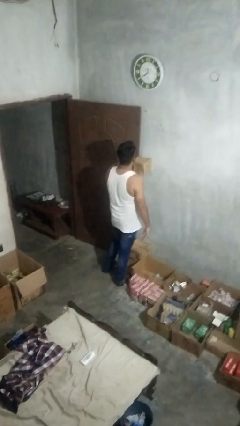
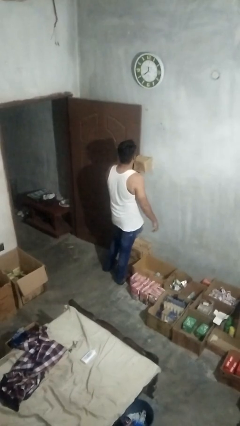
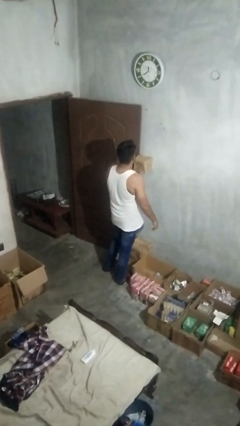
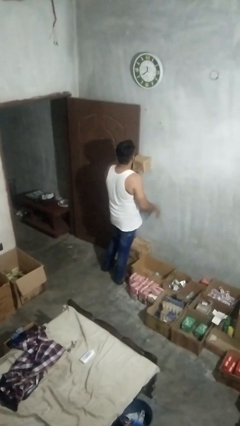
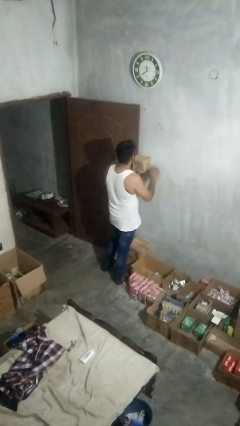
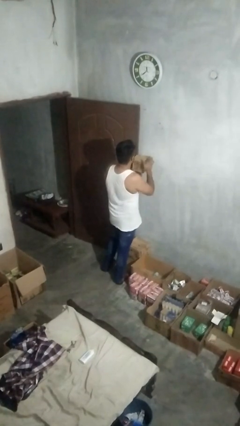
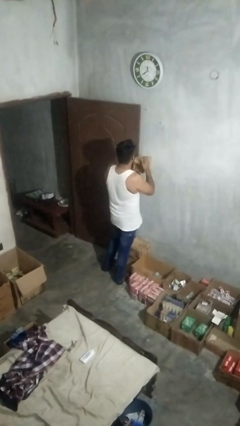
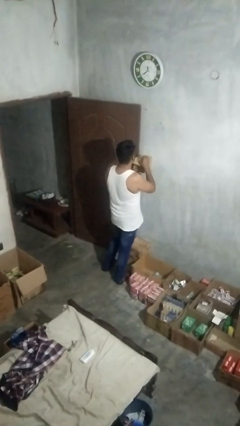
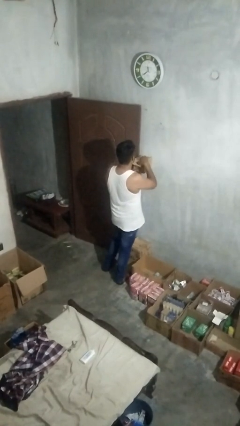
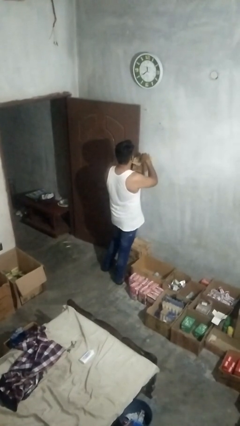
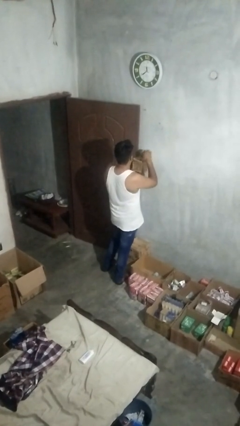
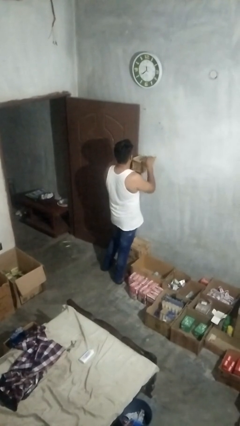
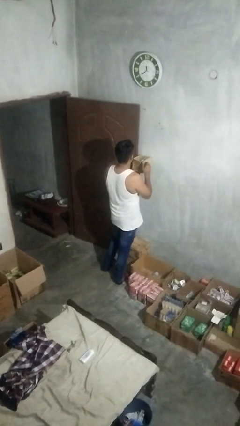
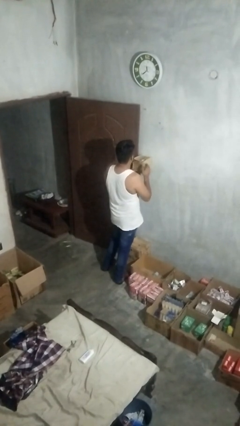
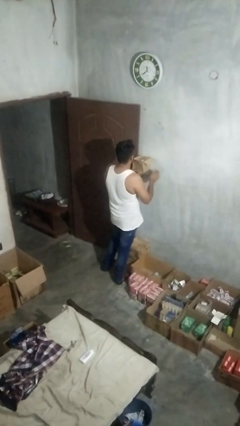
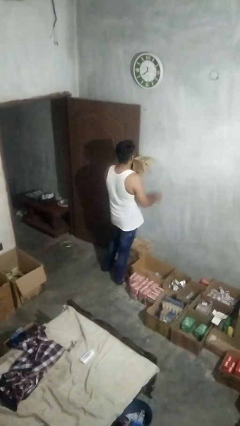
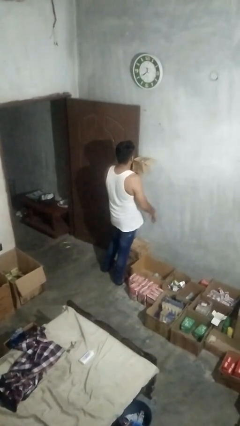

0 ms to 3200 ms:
person opens mailbox

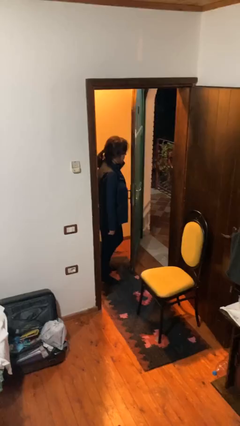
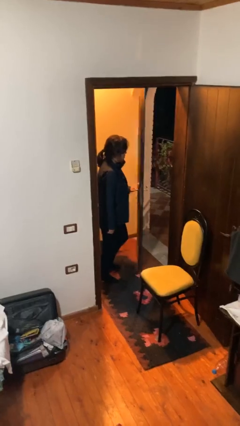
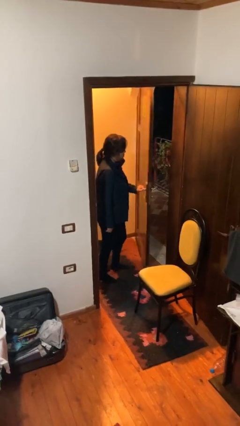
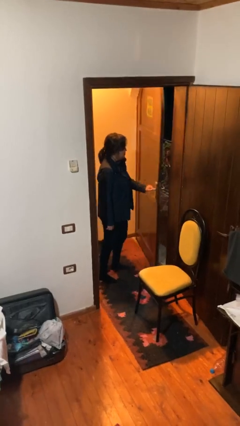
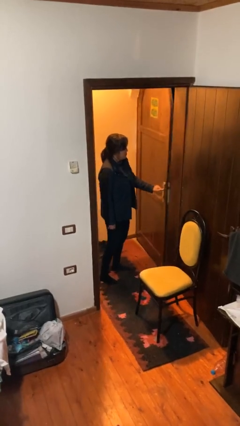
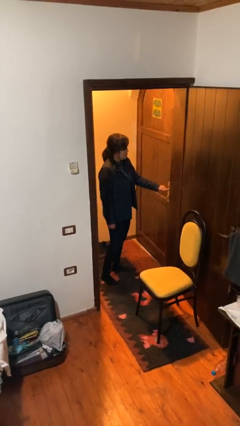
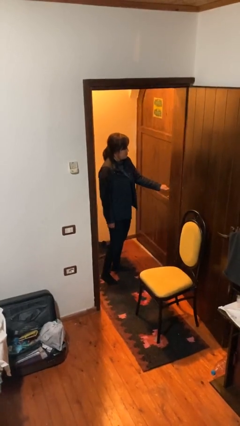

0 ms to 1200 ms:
person closes facility door

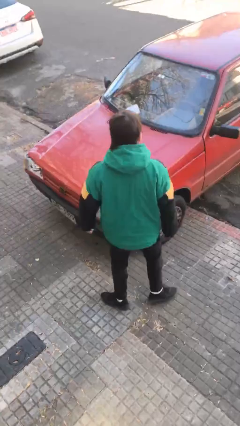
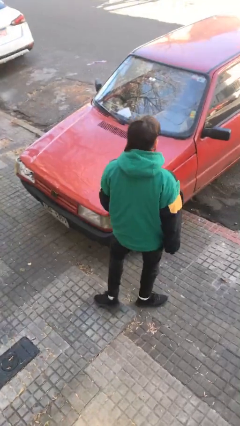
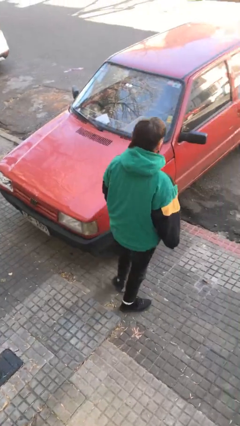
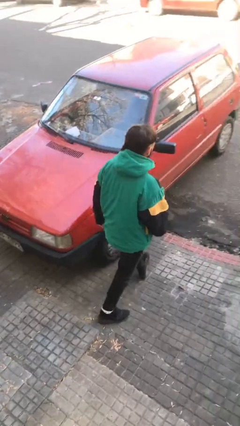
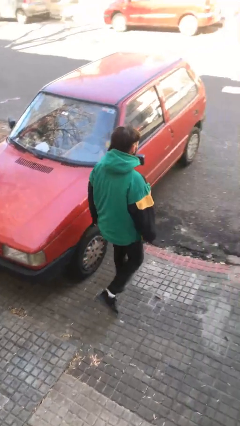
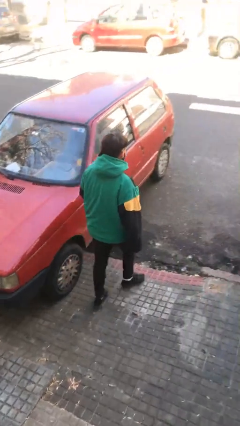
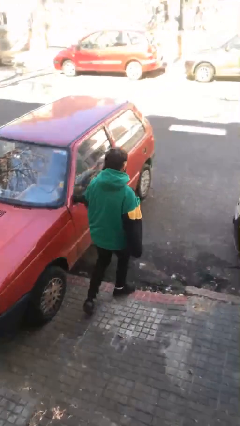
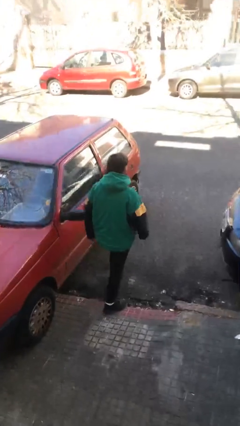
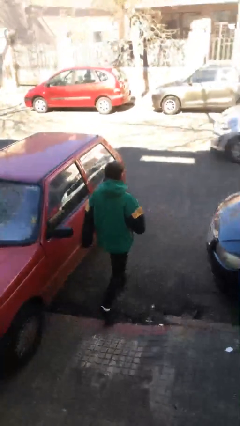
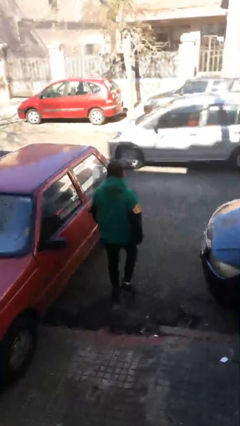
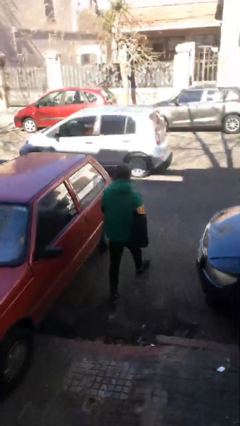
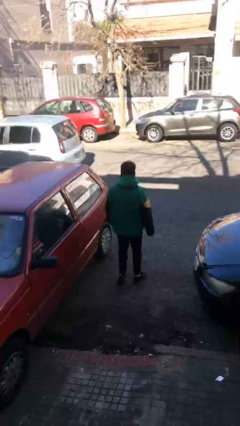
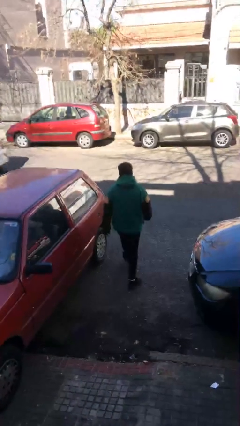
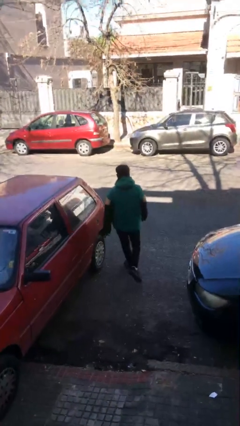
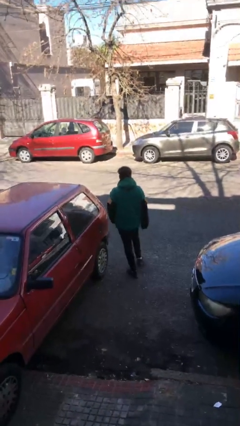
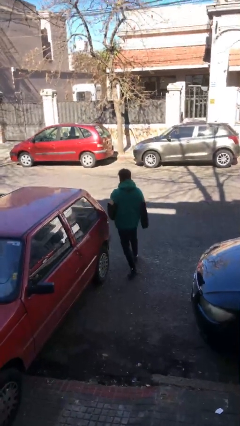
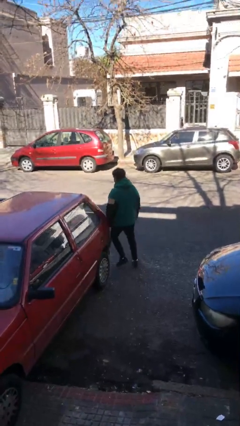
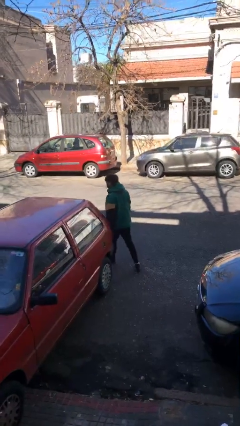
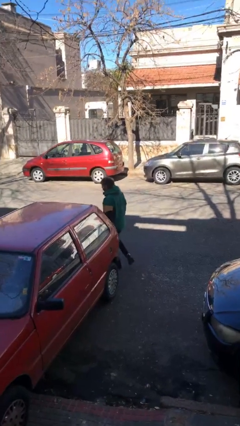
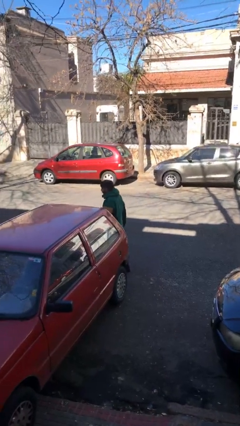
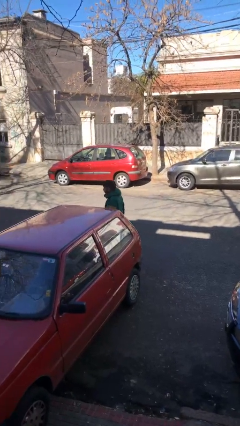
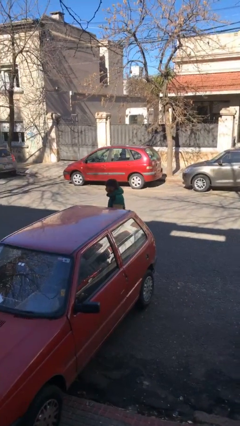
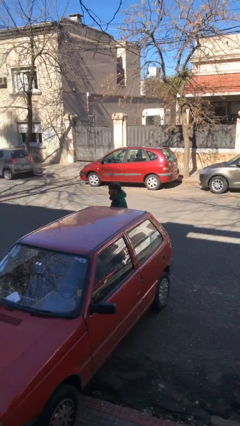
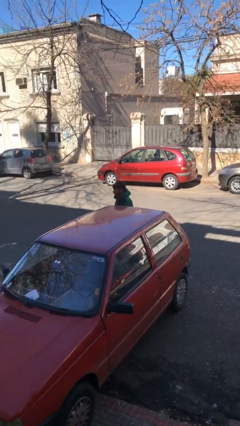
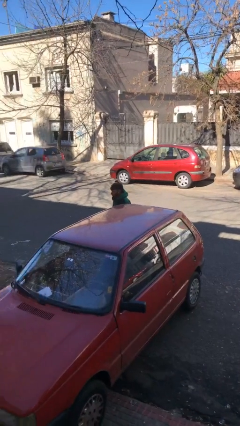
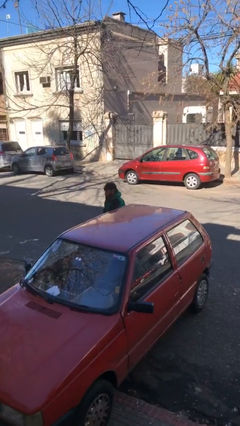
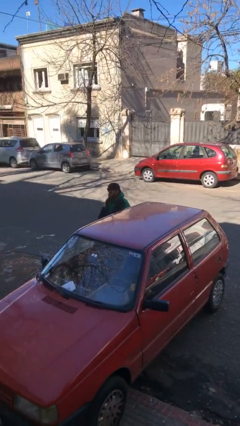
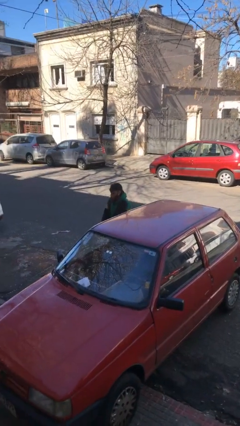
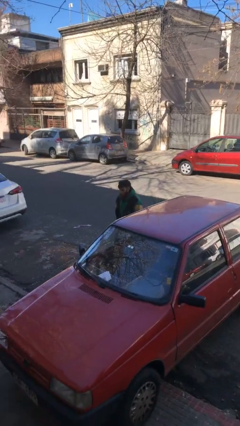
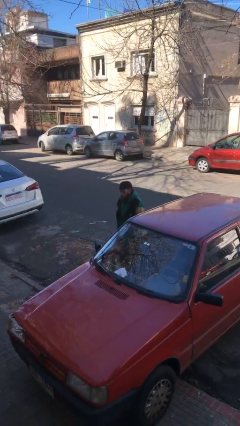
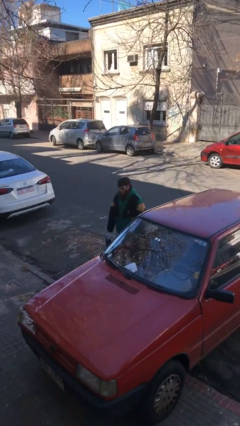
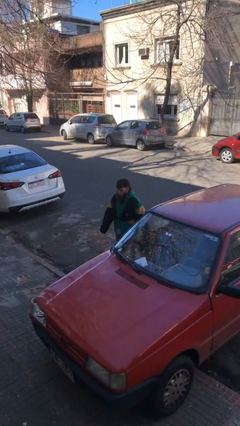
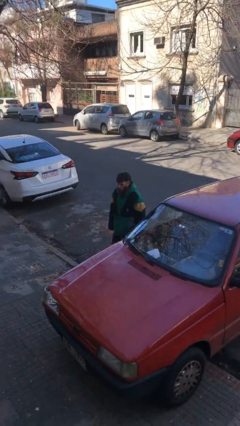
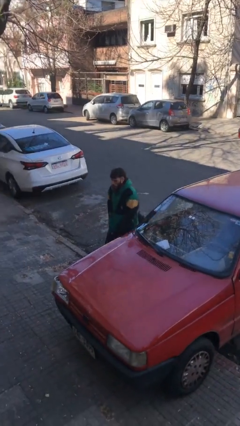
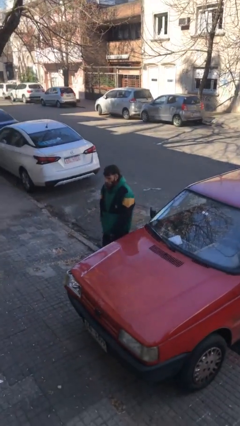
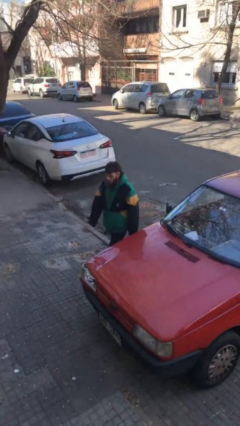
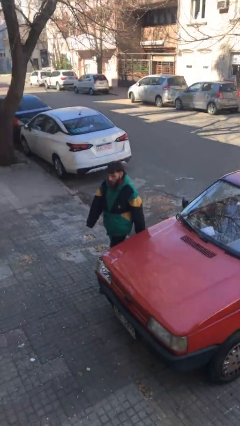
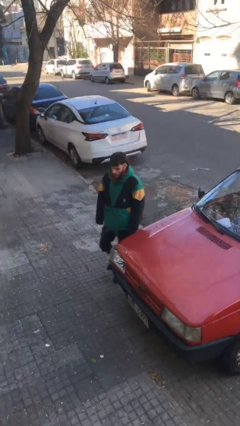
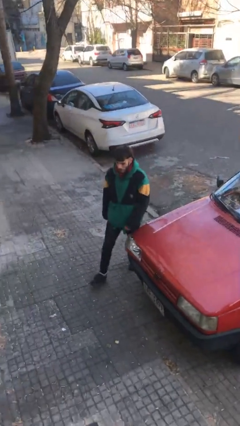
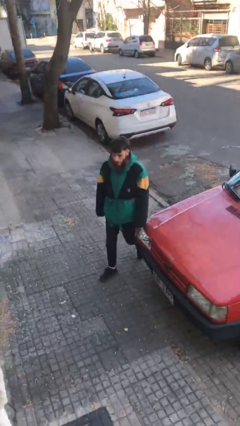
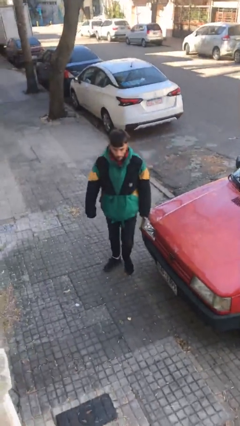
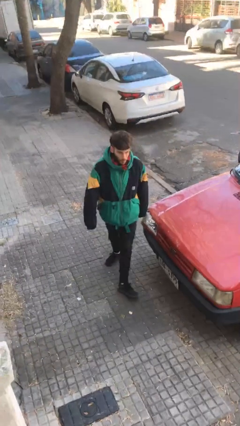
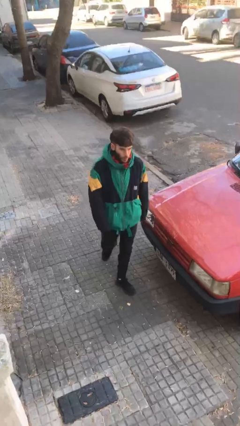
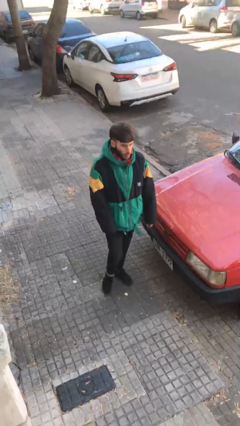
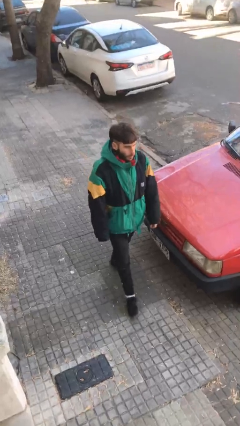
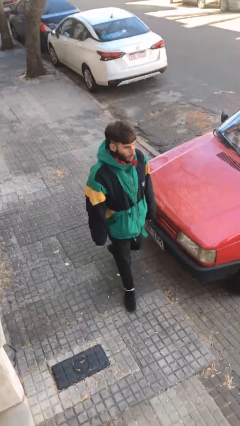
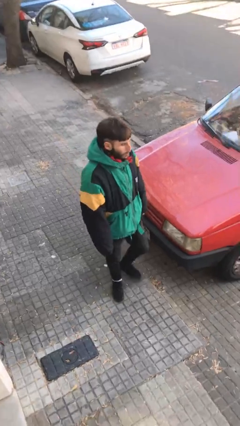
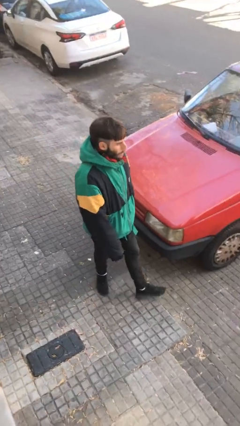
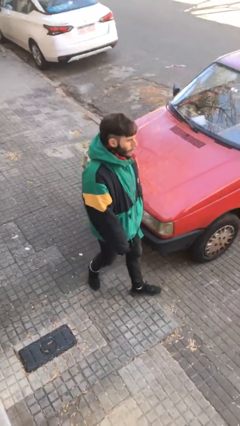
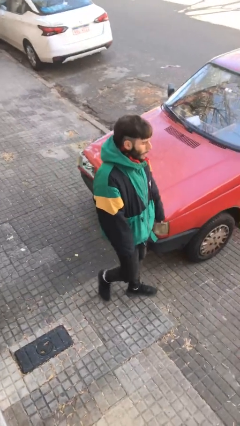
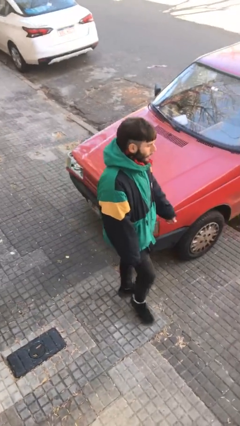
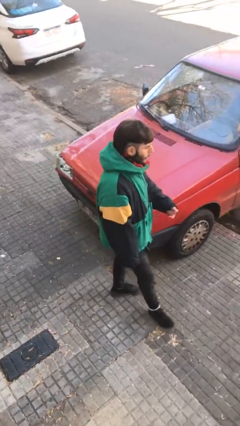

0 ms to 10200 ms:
person walks around car

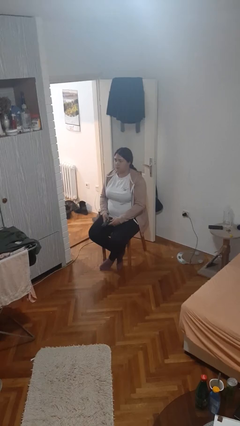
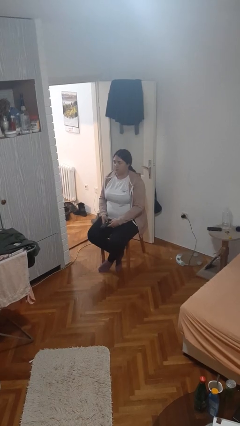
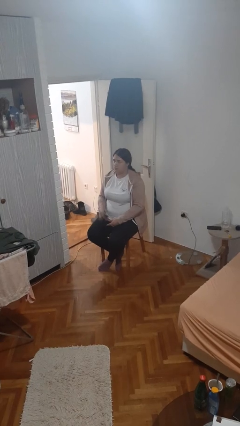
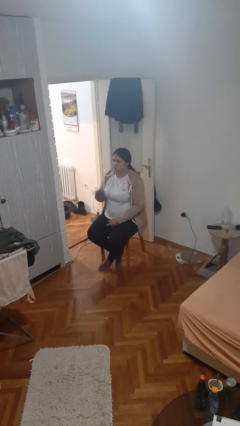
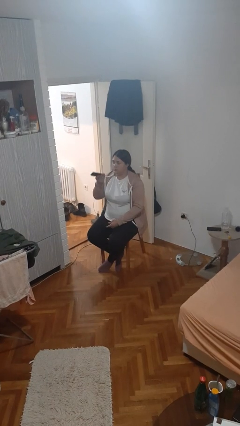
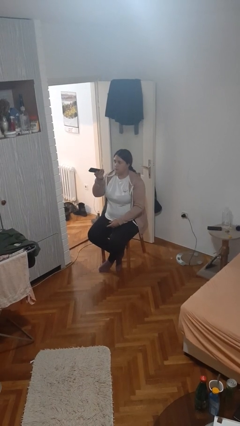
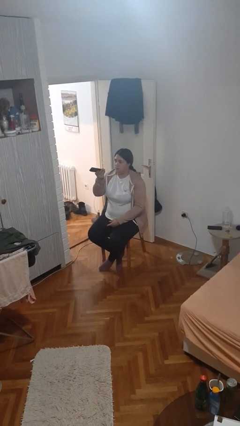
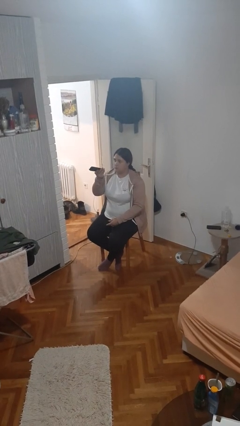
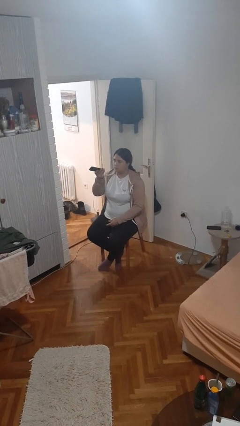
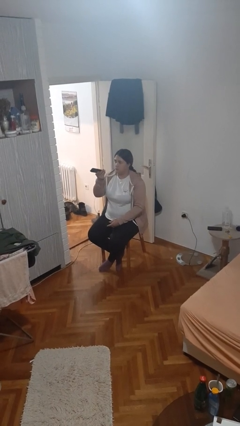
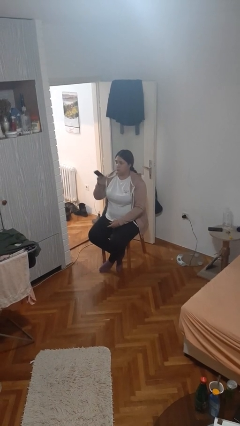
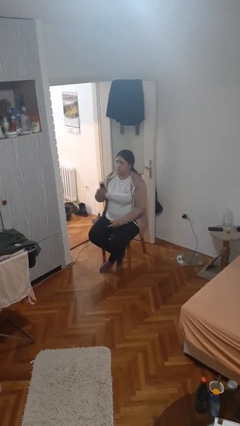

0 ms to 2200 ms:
person uses television remote

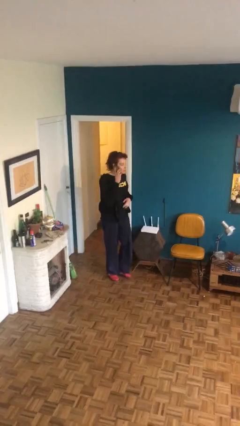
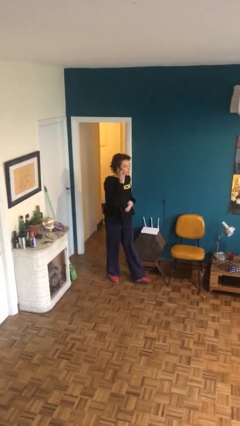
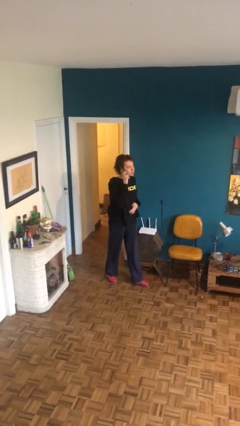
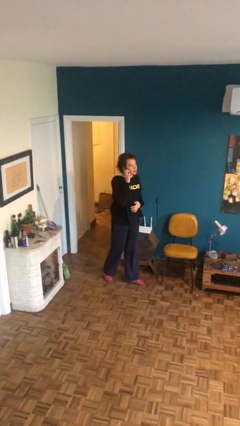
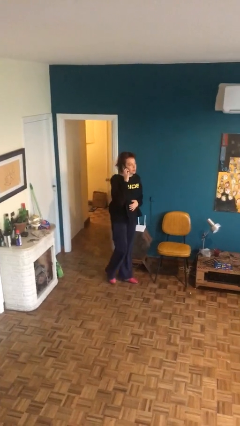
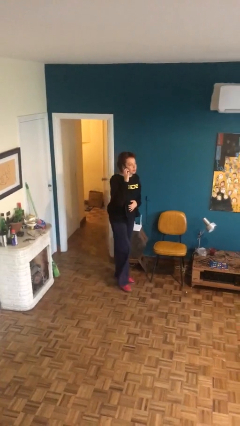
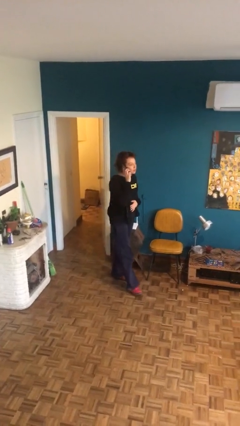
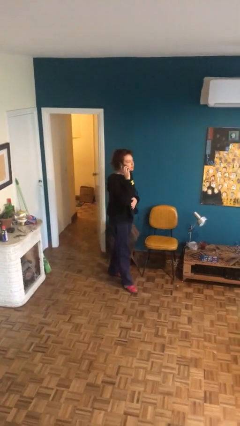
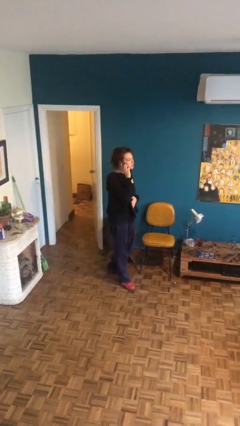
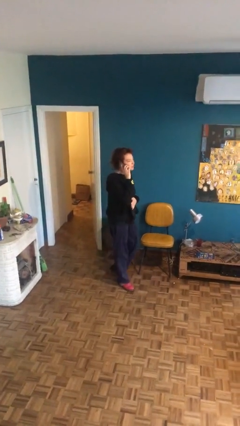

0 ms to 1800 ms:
person talks on phone
